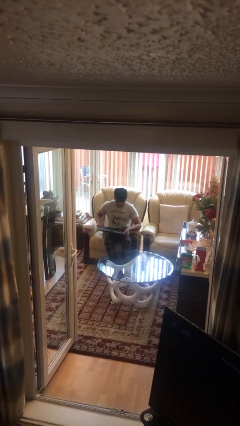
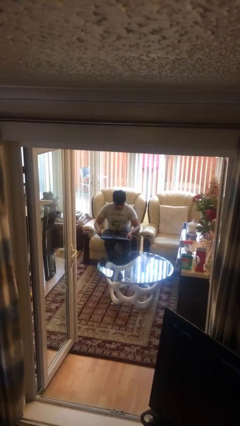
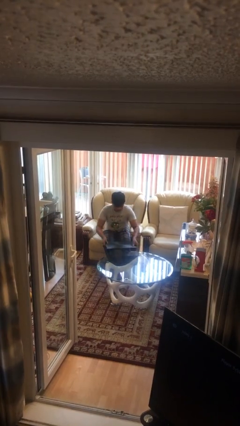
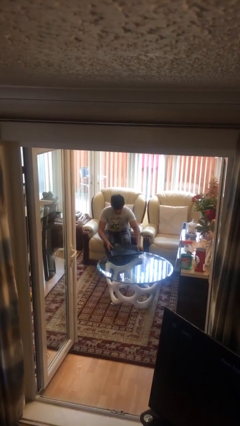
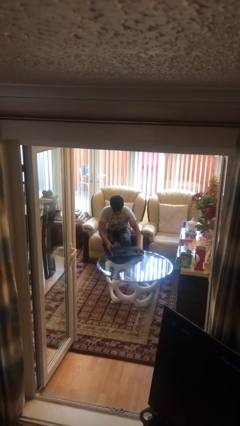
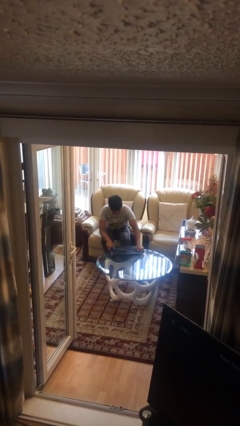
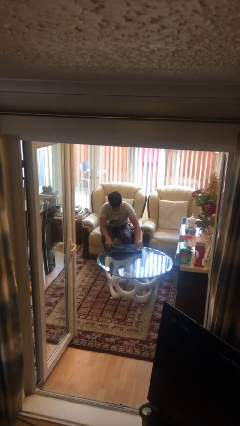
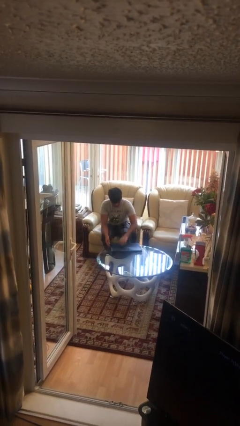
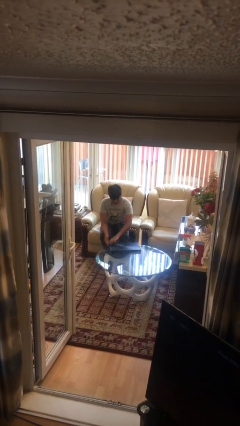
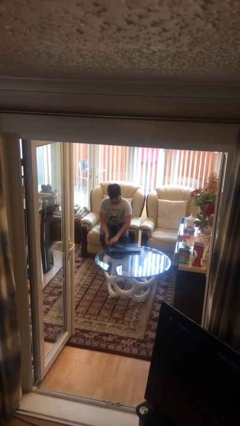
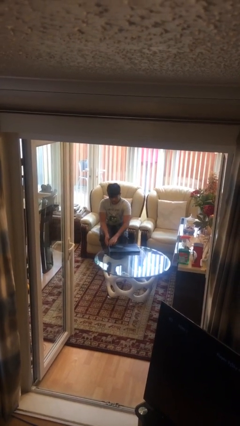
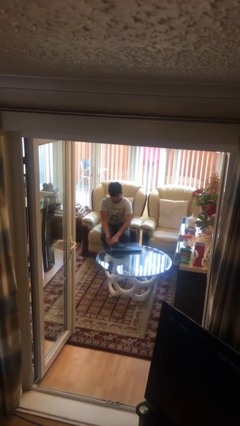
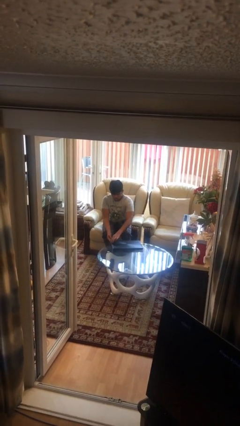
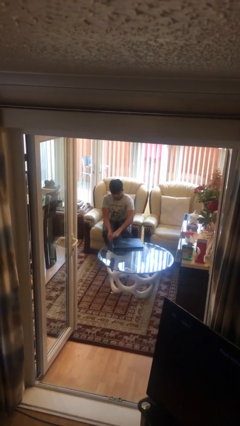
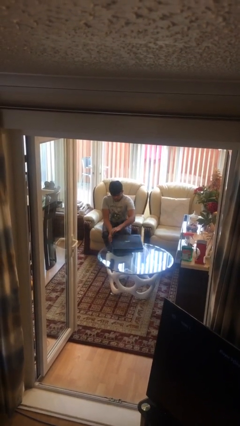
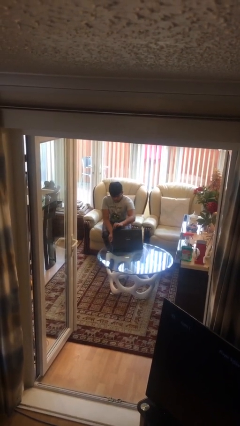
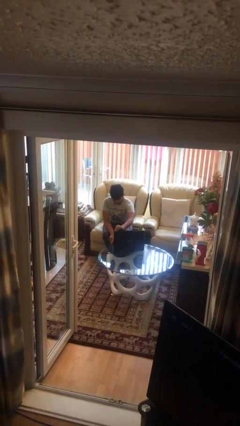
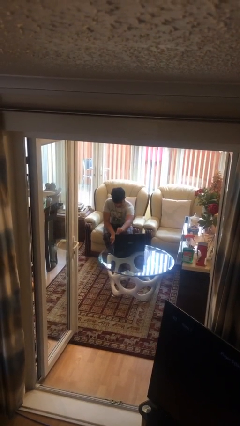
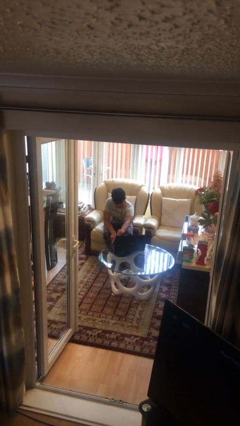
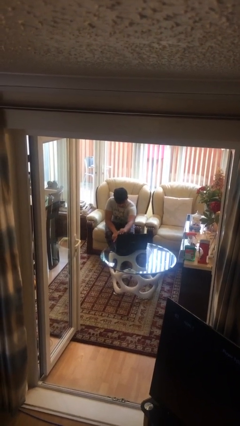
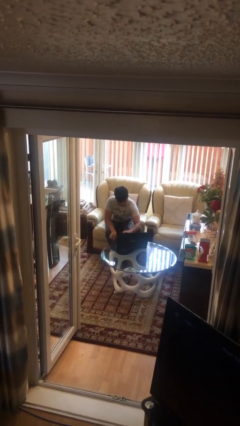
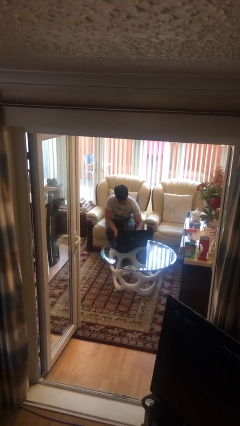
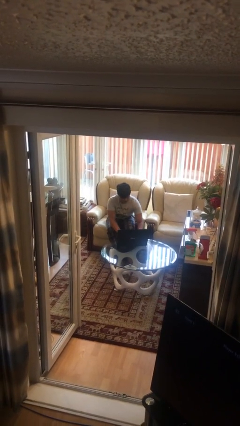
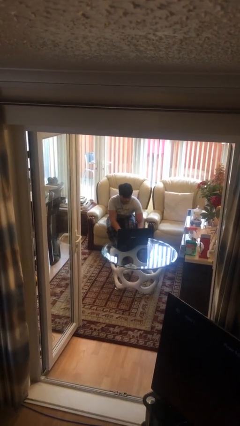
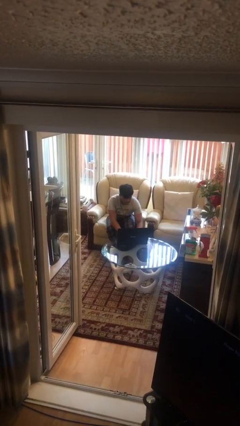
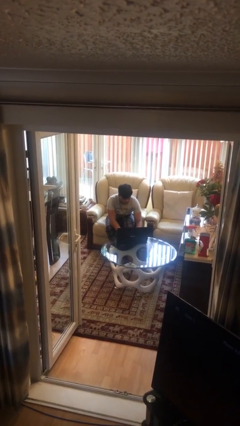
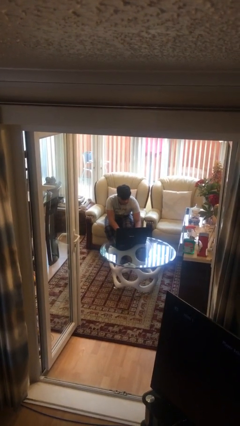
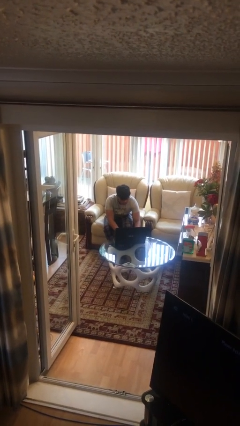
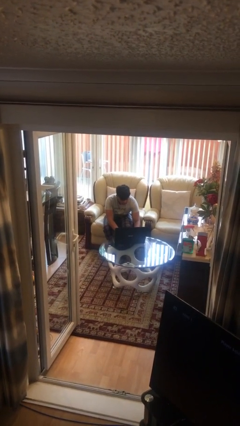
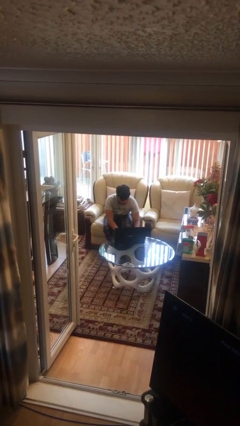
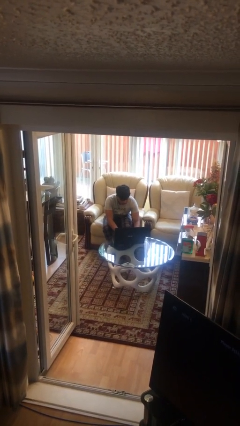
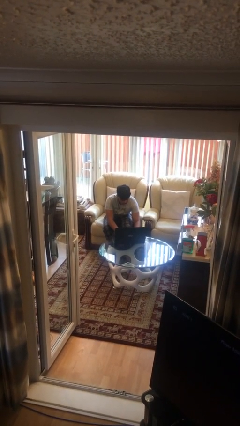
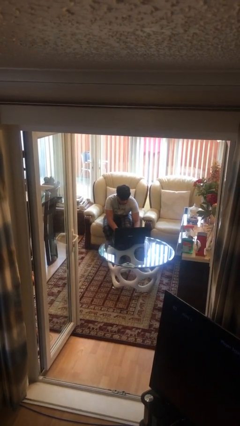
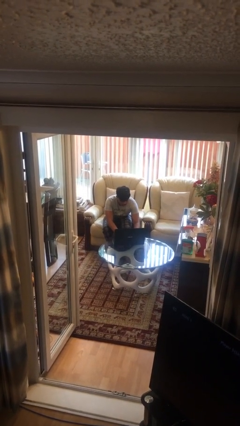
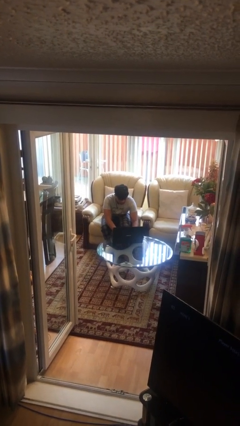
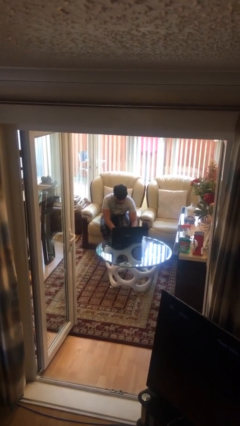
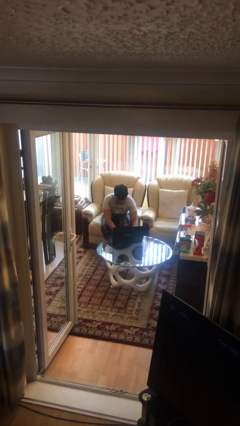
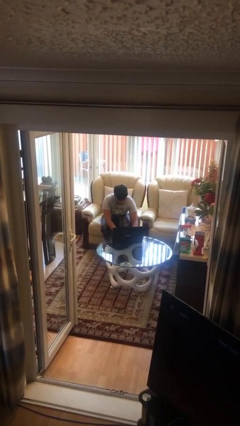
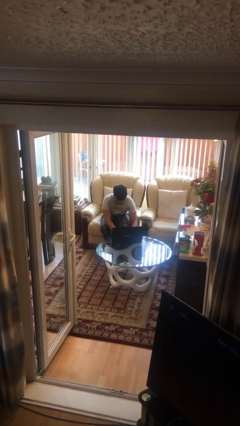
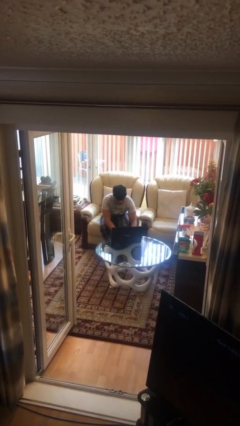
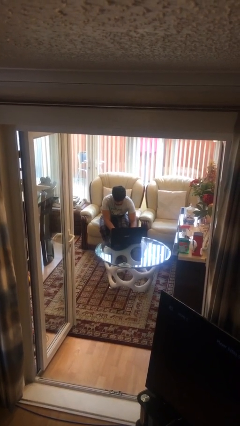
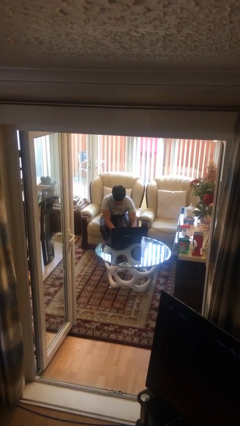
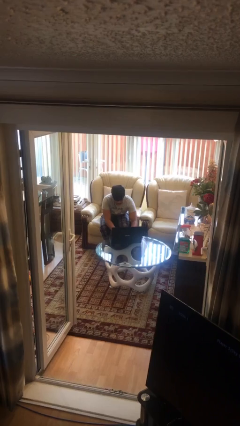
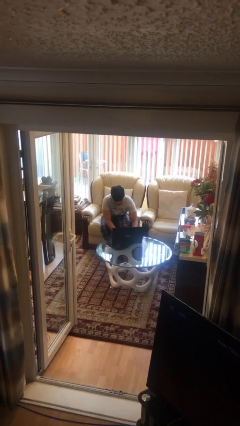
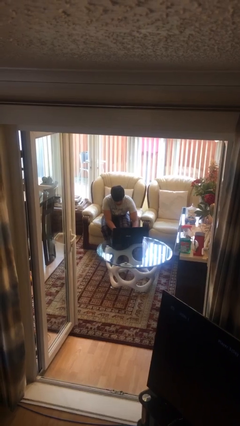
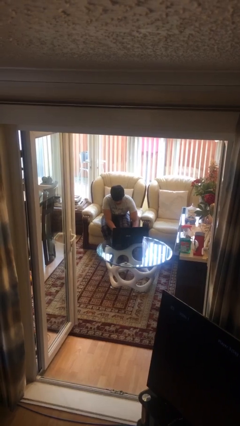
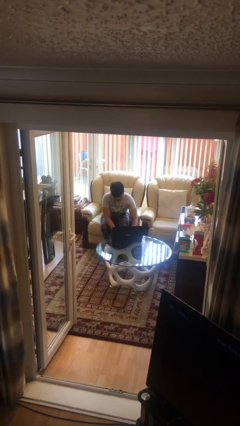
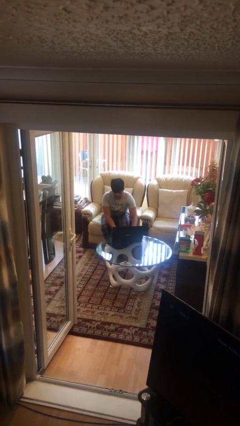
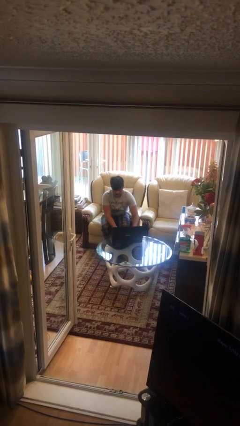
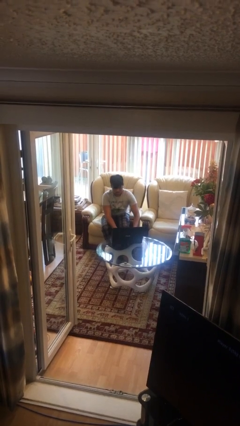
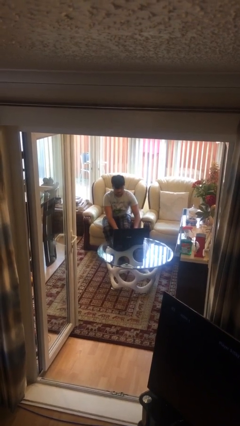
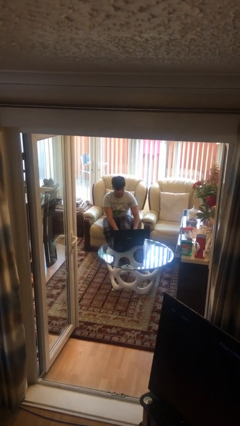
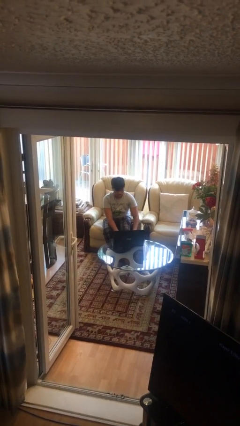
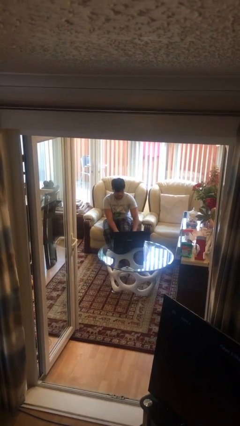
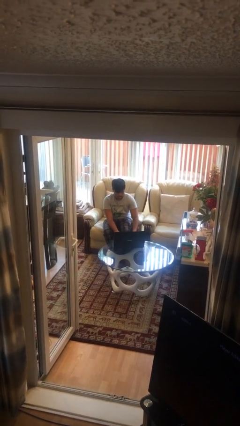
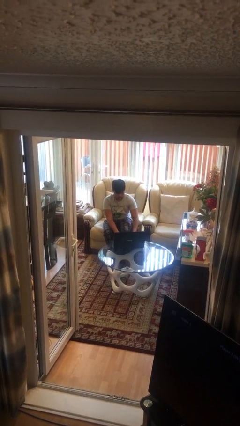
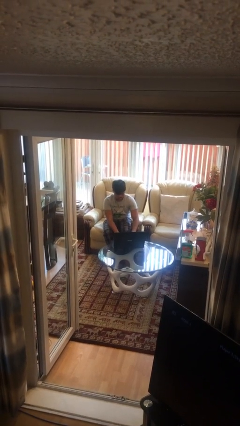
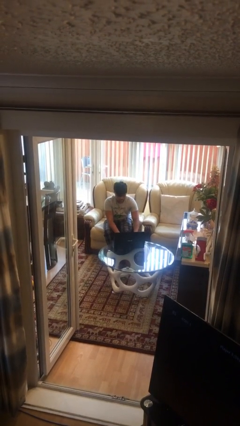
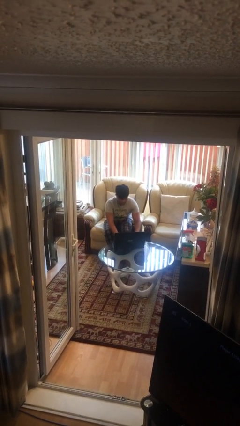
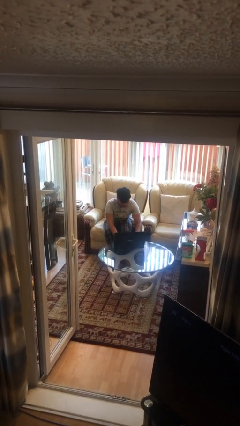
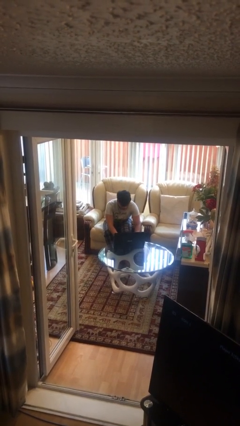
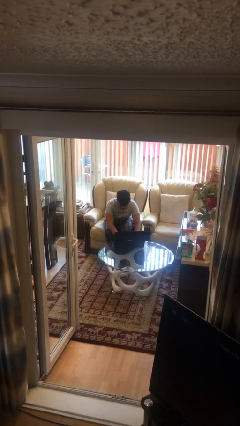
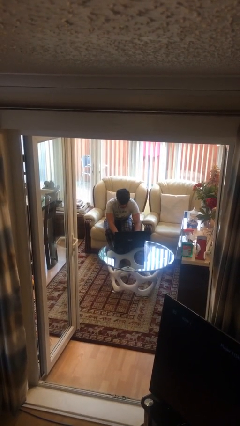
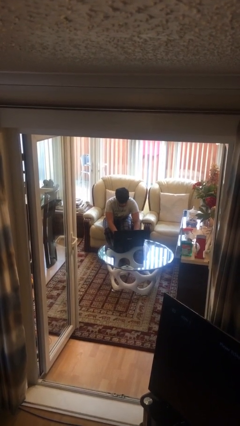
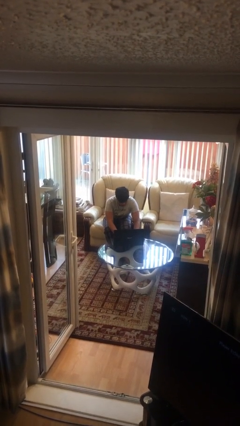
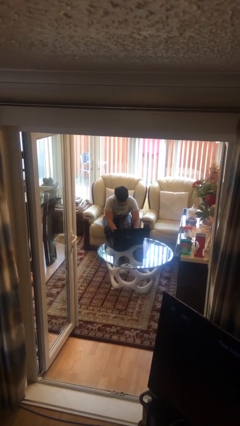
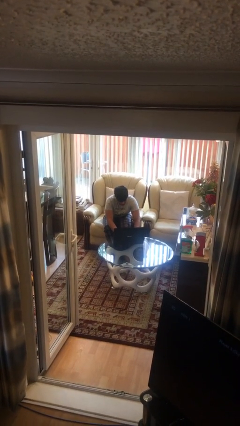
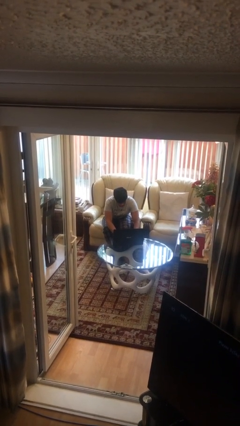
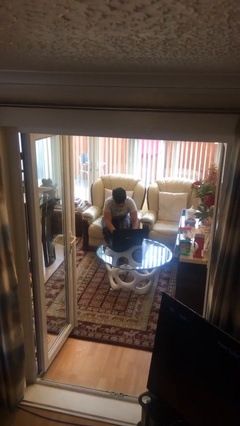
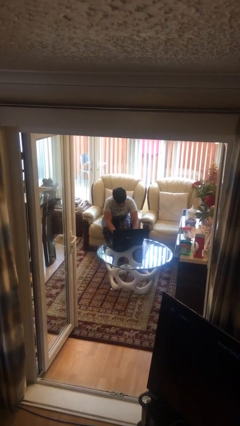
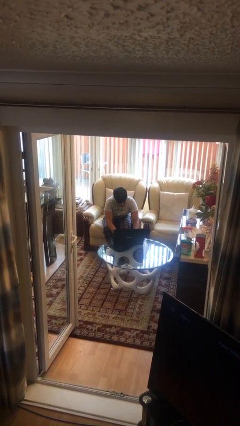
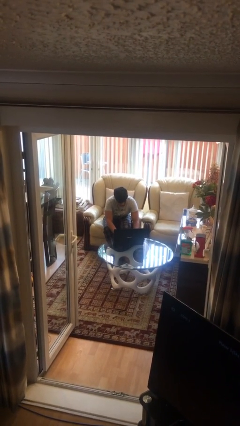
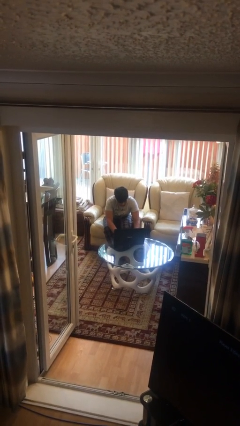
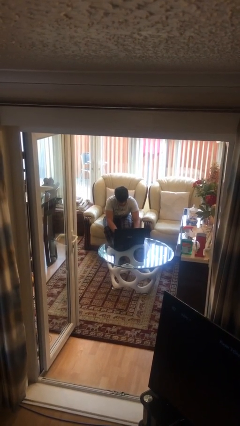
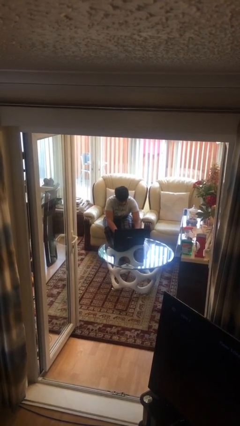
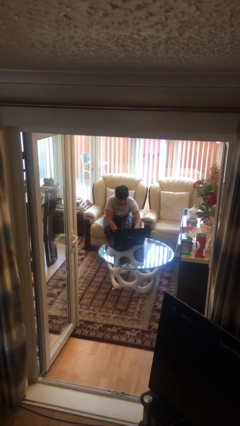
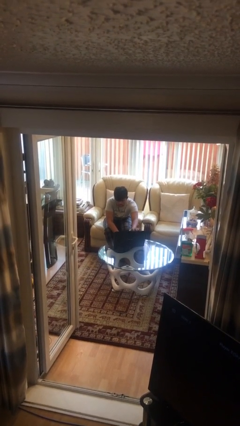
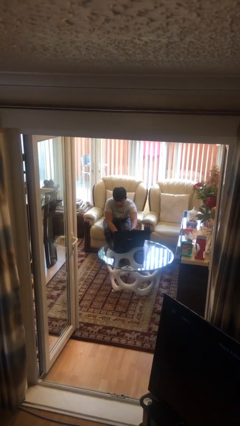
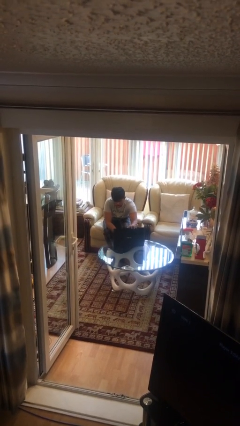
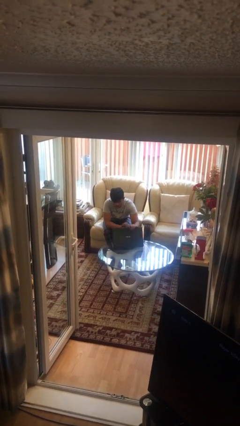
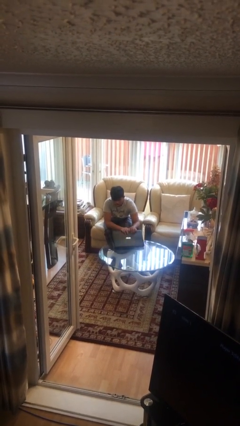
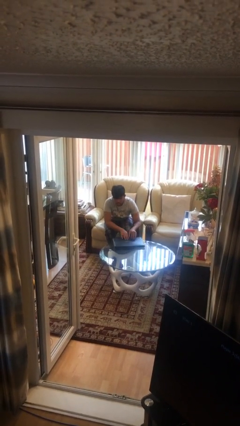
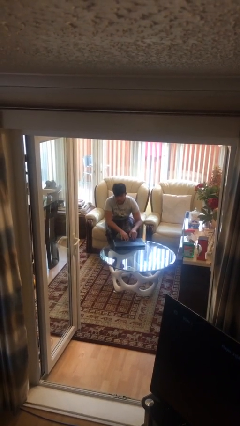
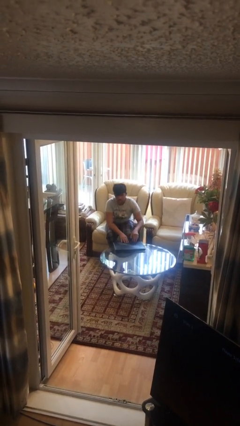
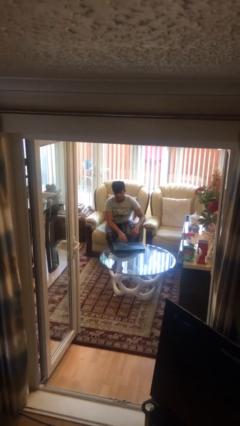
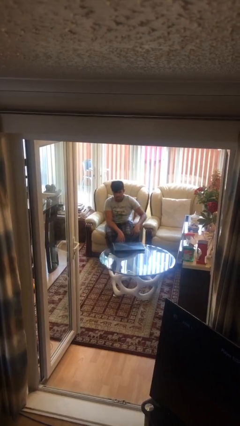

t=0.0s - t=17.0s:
person interacts with laptop

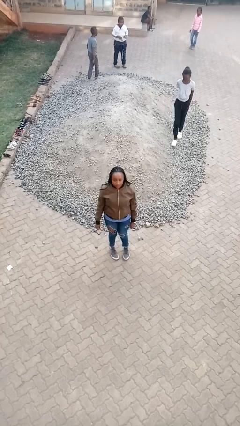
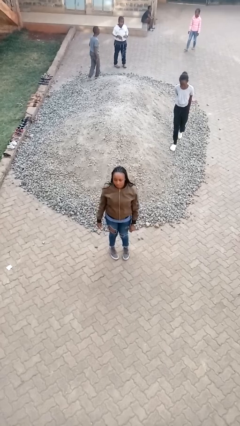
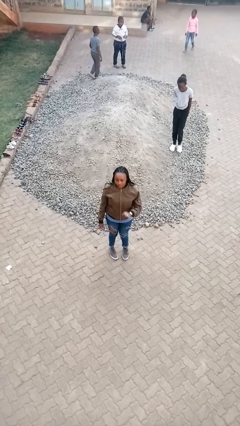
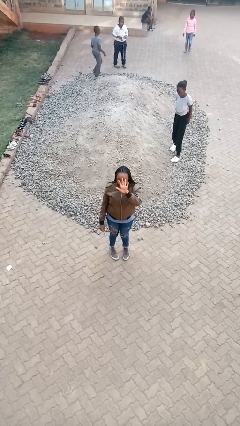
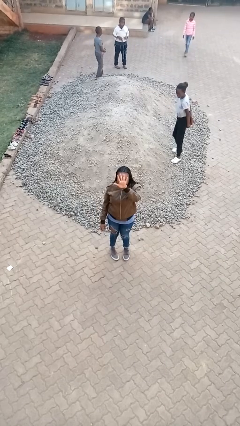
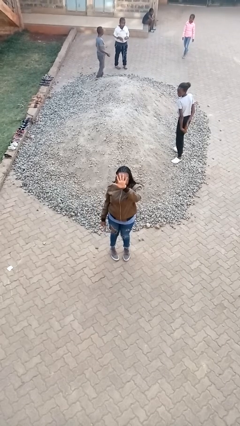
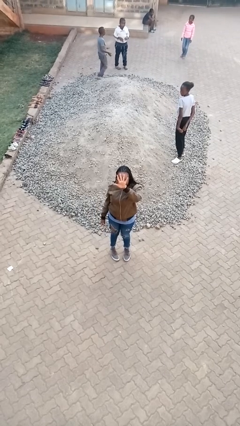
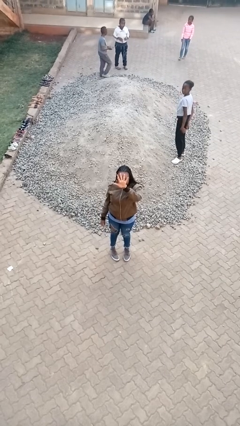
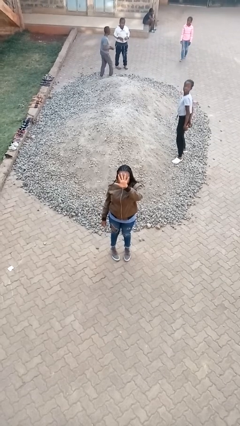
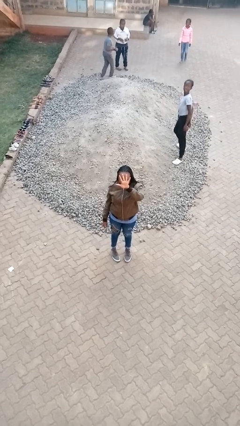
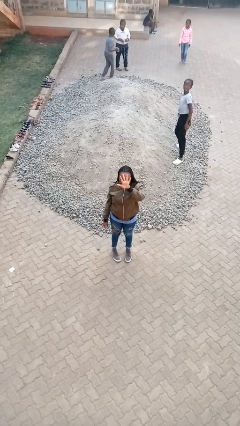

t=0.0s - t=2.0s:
person gestures number five
